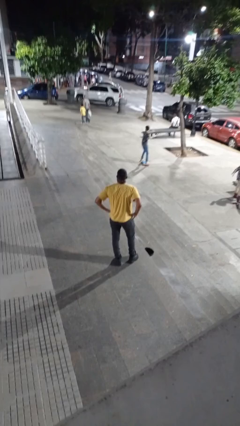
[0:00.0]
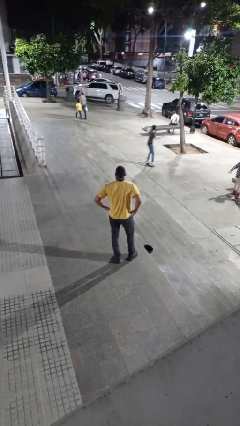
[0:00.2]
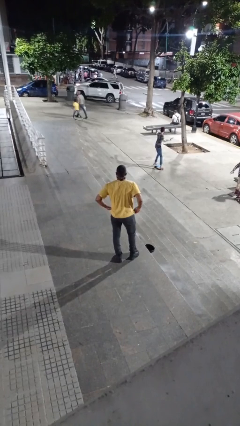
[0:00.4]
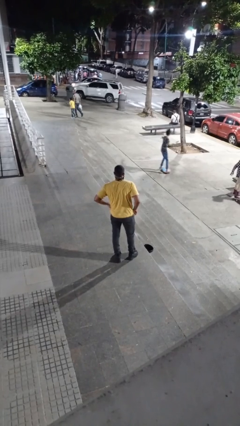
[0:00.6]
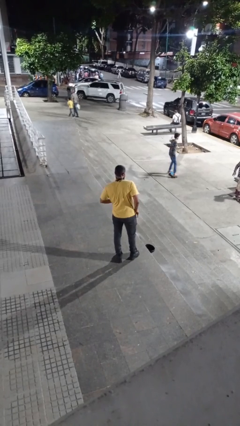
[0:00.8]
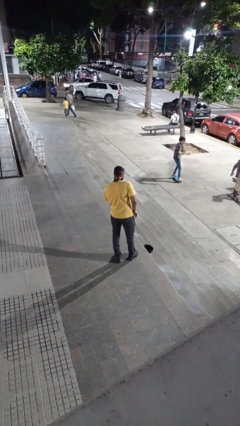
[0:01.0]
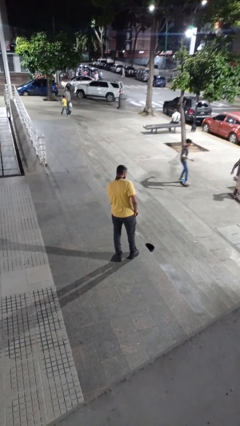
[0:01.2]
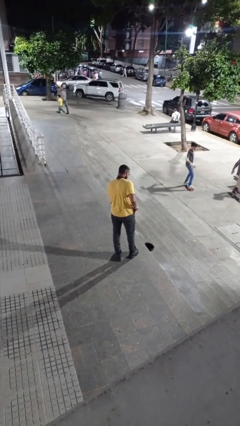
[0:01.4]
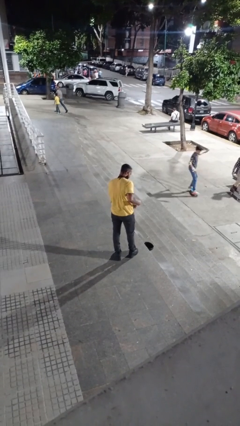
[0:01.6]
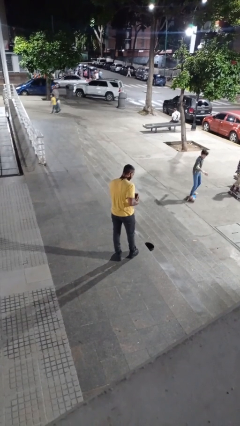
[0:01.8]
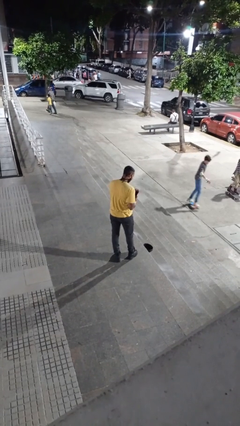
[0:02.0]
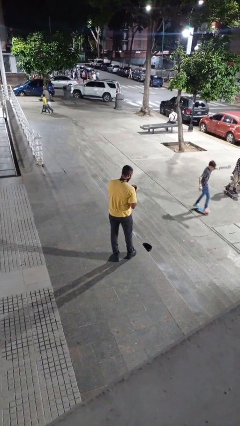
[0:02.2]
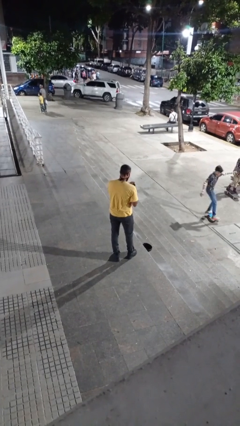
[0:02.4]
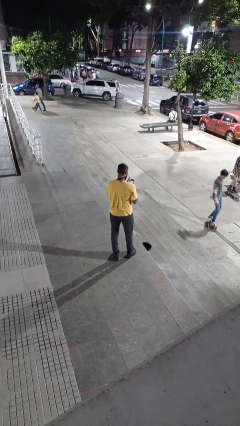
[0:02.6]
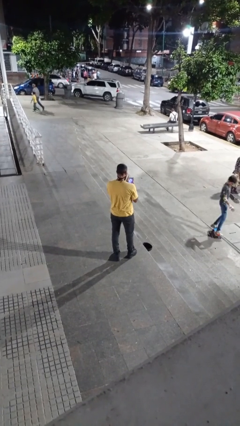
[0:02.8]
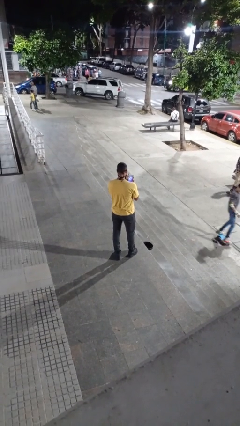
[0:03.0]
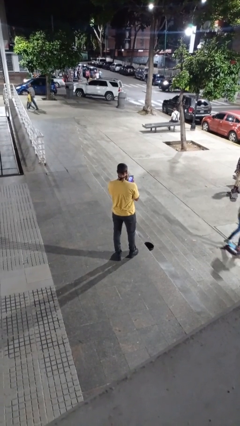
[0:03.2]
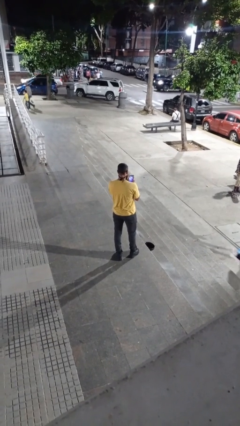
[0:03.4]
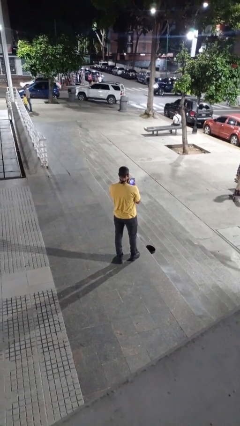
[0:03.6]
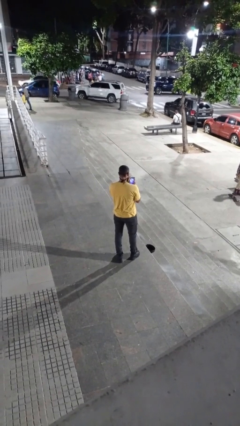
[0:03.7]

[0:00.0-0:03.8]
person takes phone from pocket

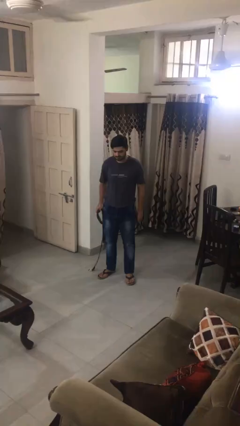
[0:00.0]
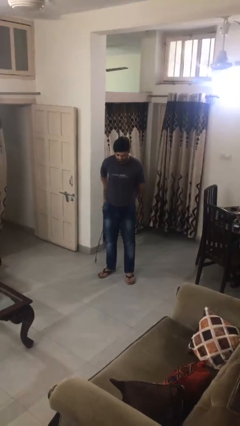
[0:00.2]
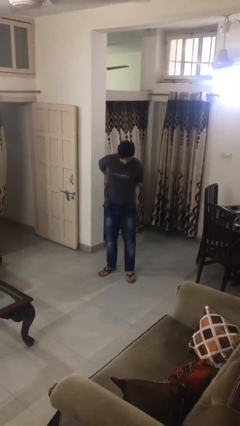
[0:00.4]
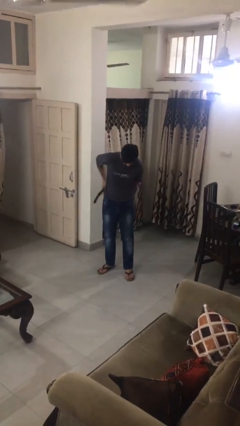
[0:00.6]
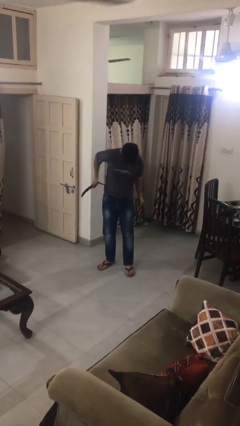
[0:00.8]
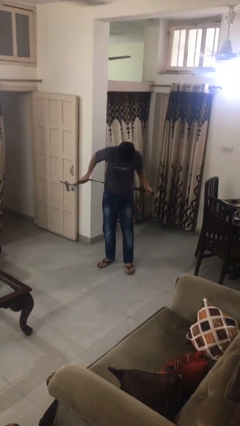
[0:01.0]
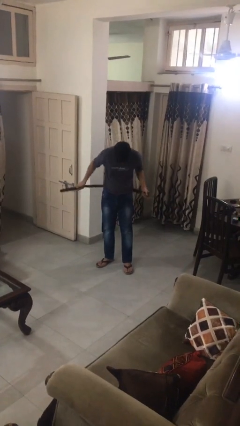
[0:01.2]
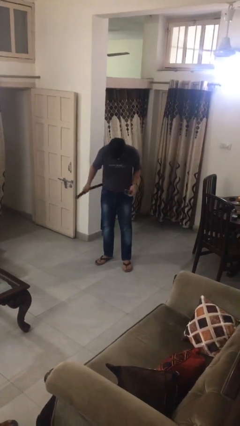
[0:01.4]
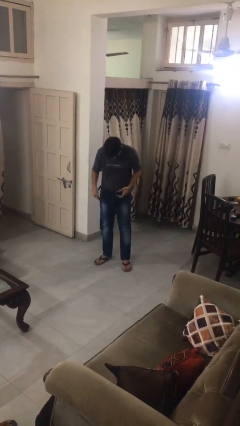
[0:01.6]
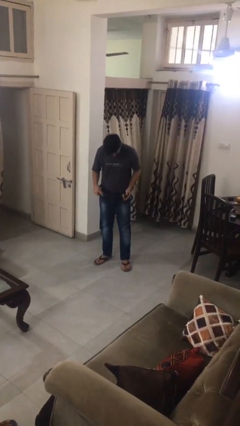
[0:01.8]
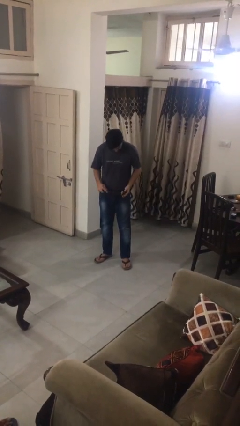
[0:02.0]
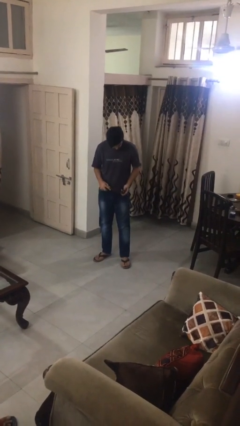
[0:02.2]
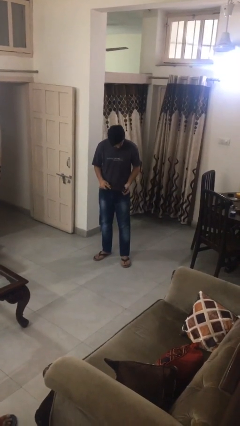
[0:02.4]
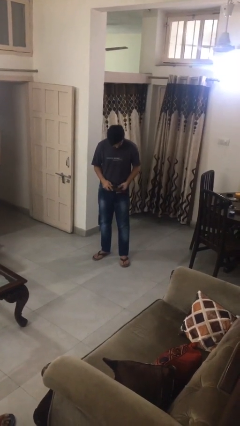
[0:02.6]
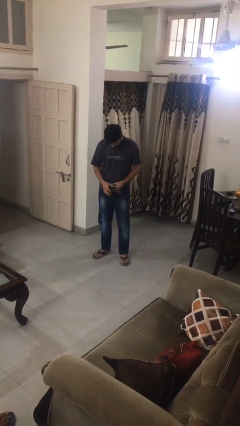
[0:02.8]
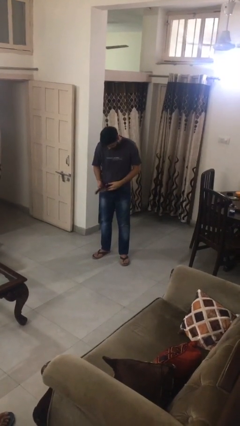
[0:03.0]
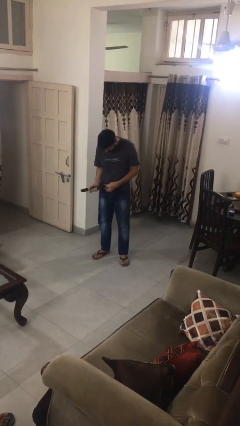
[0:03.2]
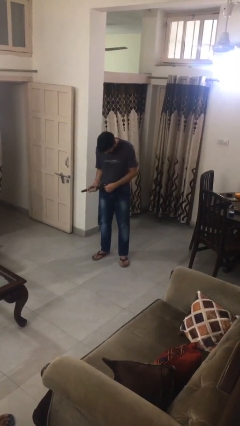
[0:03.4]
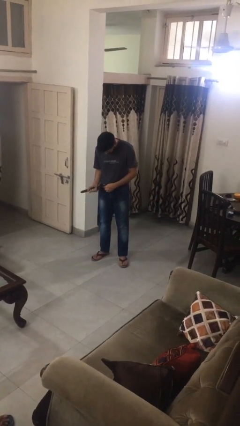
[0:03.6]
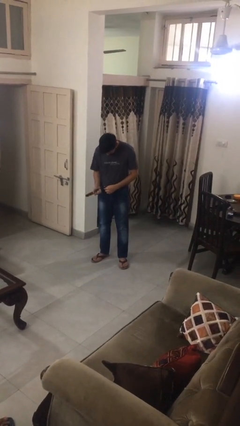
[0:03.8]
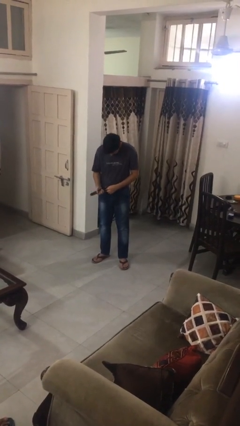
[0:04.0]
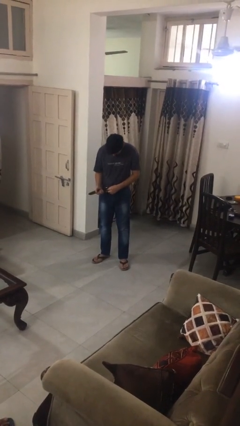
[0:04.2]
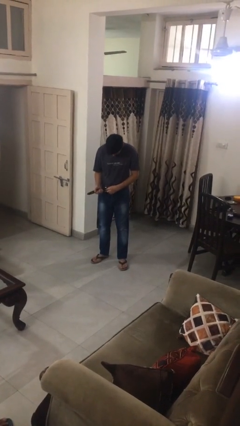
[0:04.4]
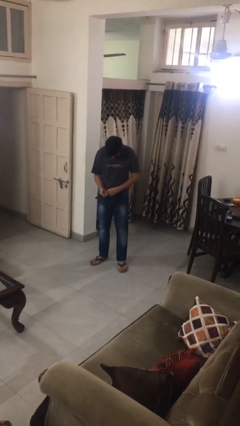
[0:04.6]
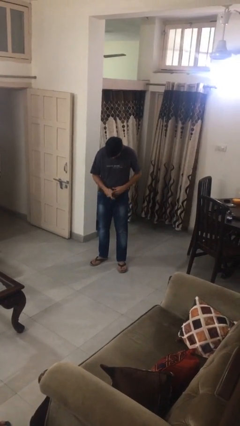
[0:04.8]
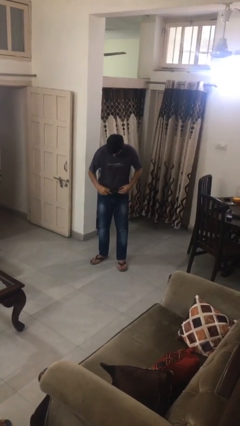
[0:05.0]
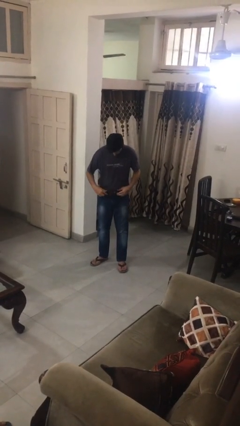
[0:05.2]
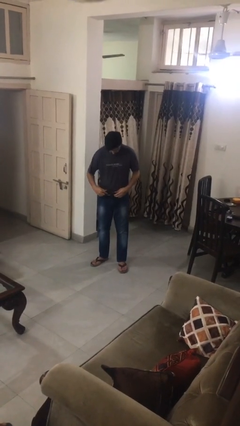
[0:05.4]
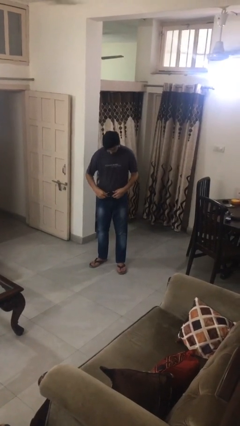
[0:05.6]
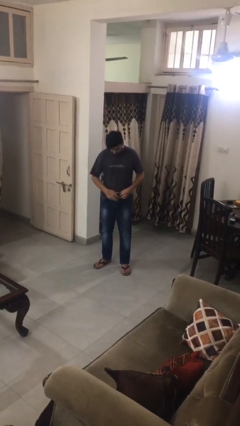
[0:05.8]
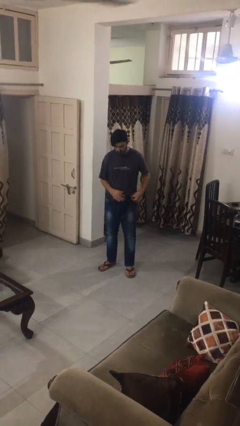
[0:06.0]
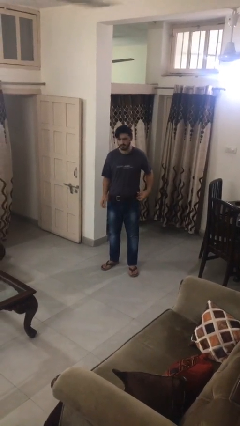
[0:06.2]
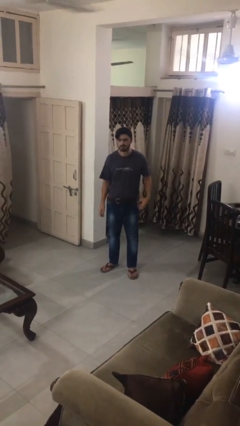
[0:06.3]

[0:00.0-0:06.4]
person puts on belt

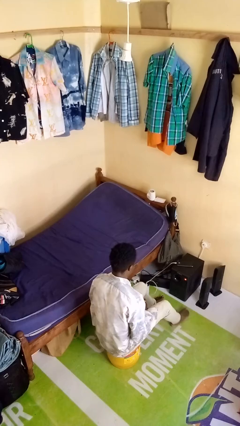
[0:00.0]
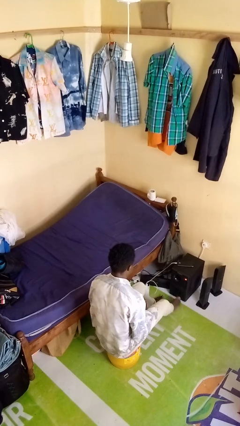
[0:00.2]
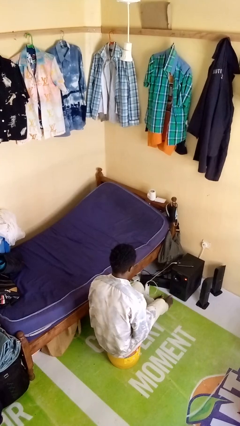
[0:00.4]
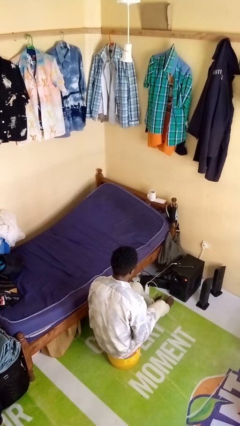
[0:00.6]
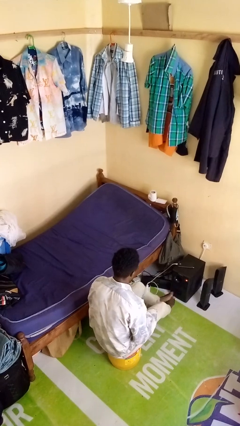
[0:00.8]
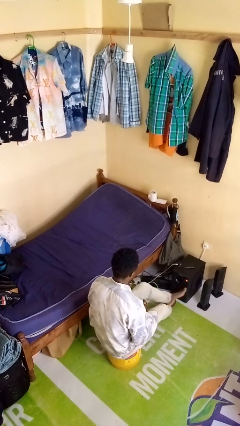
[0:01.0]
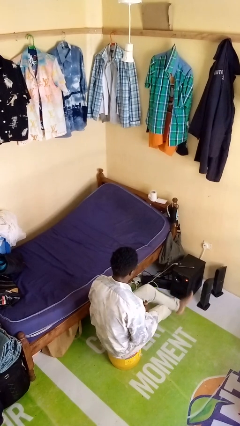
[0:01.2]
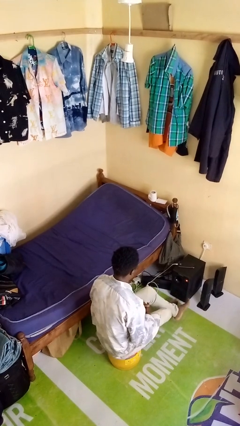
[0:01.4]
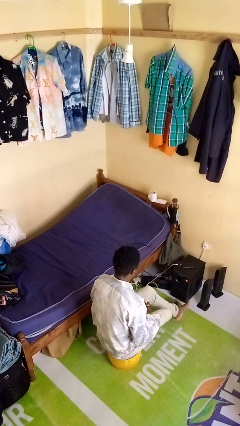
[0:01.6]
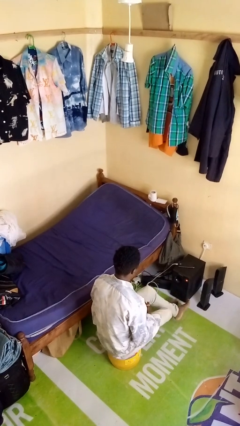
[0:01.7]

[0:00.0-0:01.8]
person crosses legs

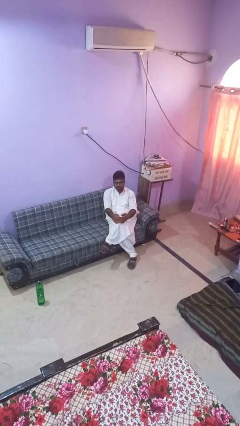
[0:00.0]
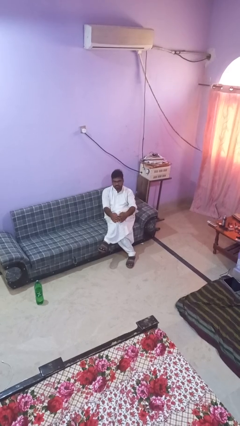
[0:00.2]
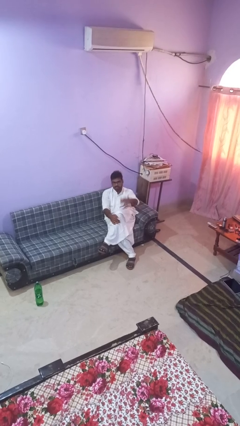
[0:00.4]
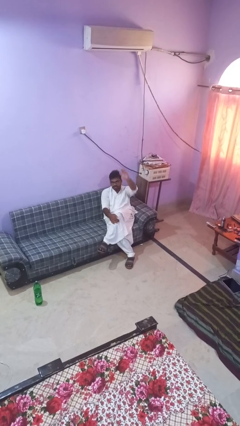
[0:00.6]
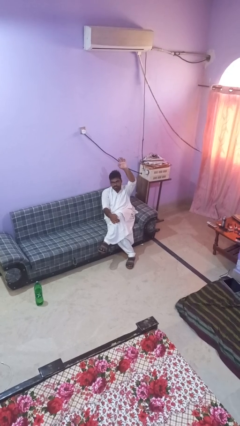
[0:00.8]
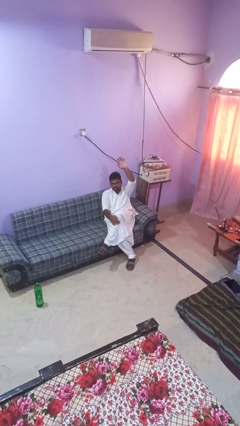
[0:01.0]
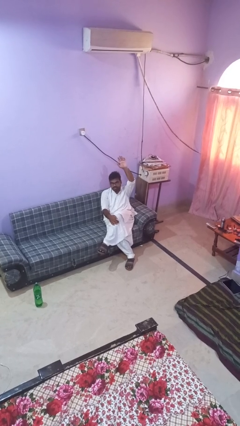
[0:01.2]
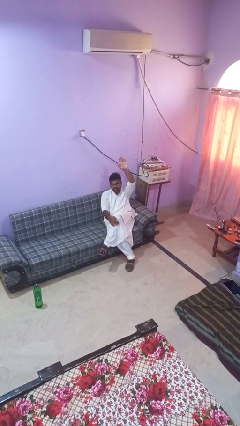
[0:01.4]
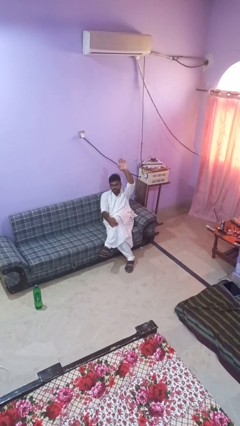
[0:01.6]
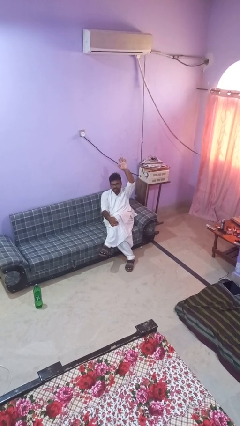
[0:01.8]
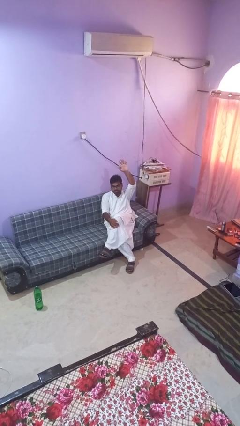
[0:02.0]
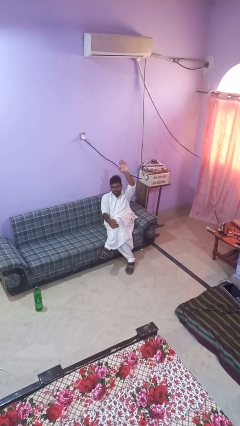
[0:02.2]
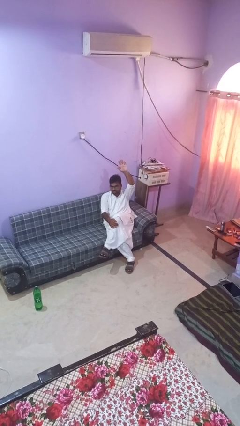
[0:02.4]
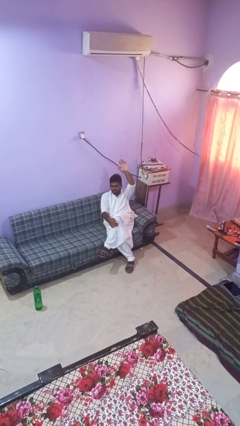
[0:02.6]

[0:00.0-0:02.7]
person gestures raise hand

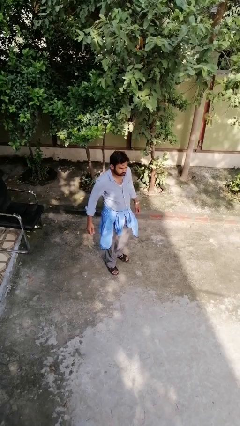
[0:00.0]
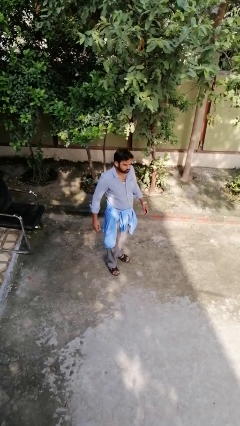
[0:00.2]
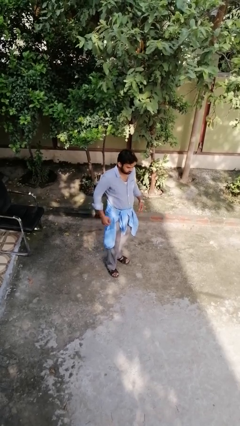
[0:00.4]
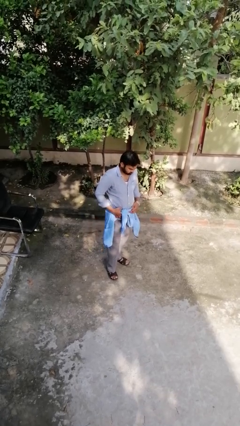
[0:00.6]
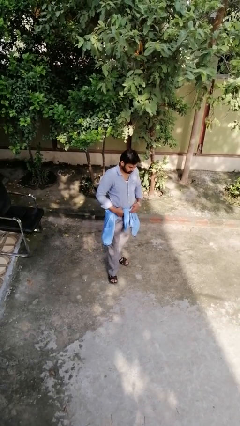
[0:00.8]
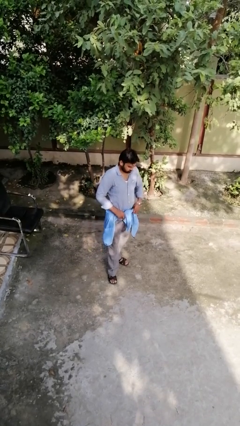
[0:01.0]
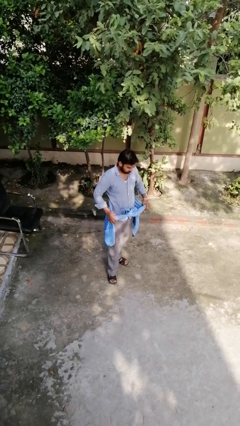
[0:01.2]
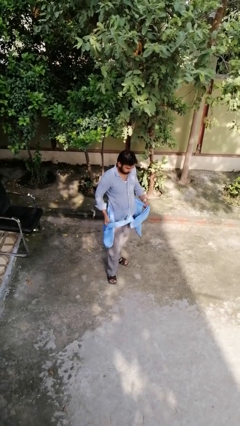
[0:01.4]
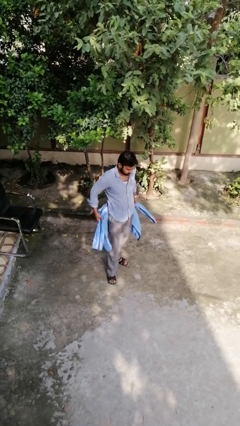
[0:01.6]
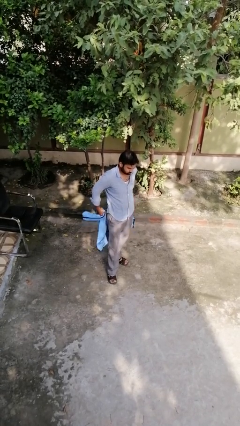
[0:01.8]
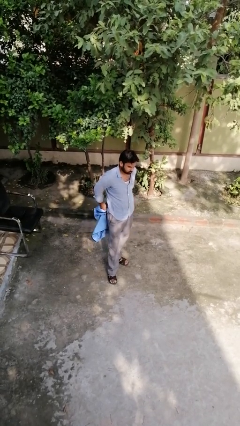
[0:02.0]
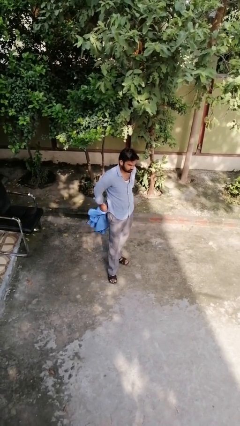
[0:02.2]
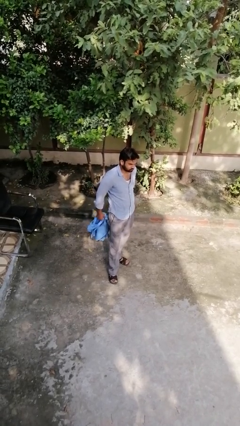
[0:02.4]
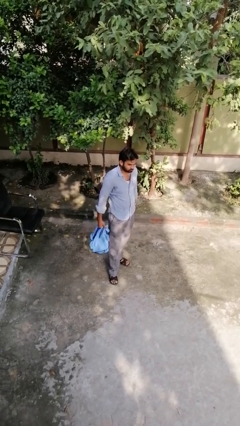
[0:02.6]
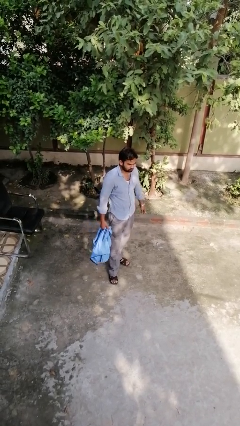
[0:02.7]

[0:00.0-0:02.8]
person unties jacket around waist
